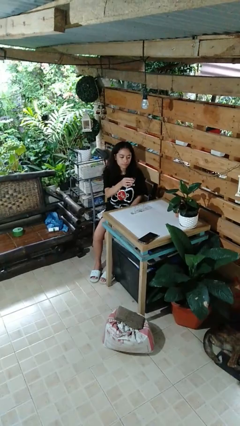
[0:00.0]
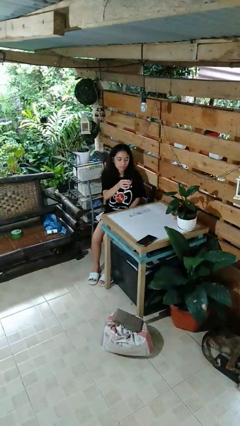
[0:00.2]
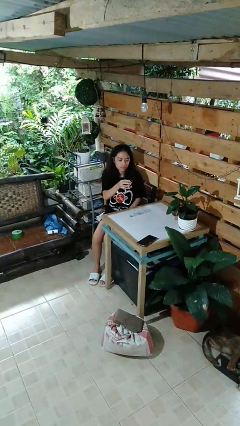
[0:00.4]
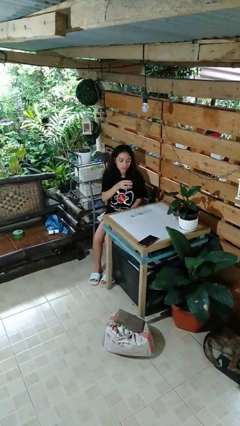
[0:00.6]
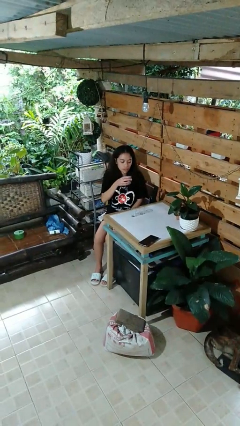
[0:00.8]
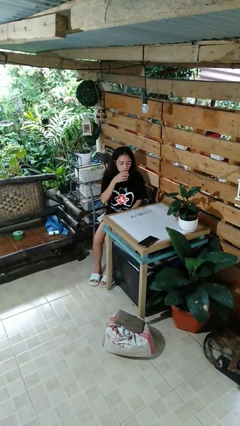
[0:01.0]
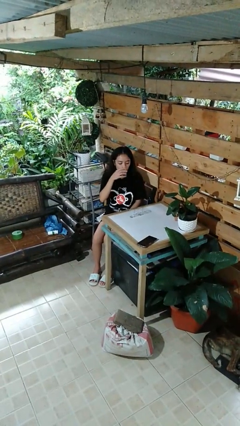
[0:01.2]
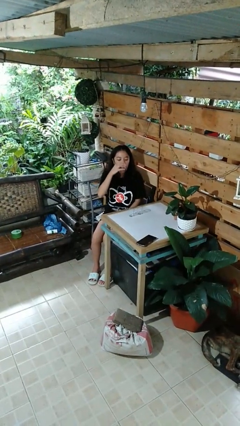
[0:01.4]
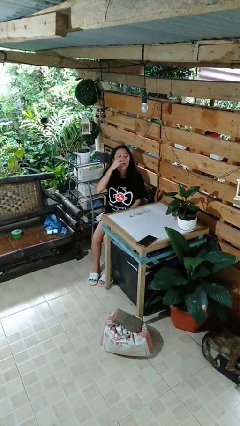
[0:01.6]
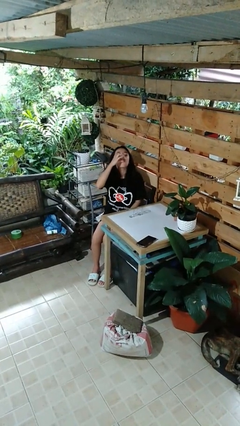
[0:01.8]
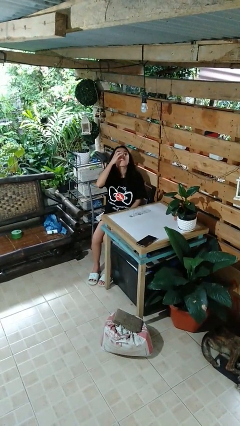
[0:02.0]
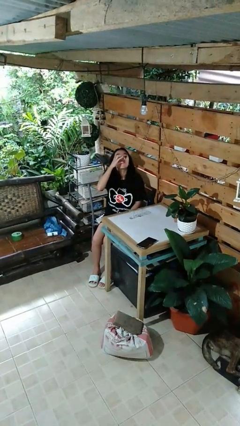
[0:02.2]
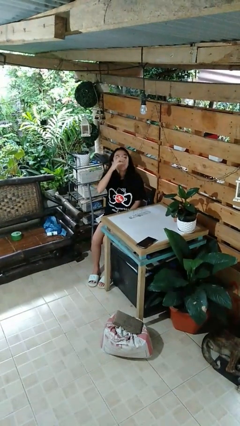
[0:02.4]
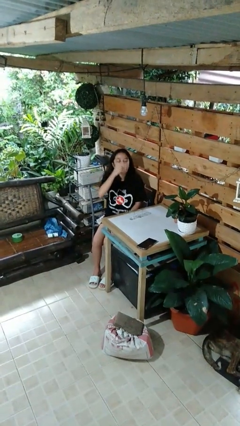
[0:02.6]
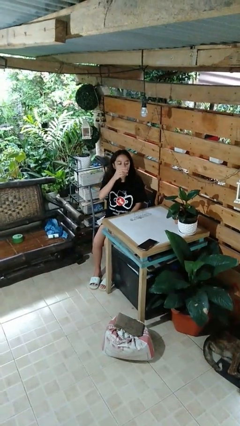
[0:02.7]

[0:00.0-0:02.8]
person drinks from shotglass

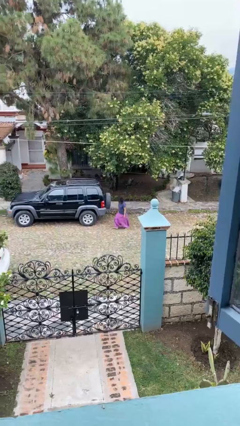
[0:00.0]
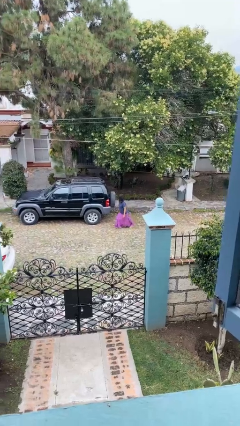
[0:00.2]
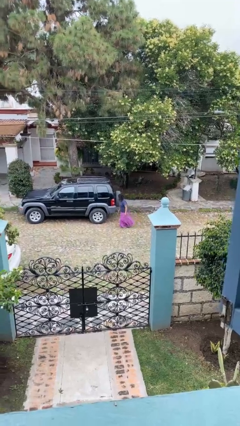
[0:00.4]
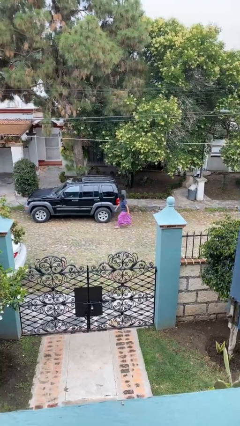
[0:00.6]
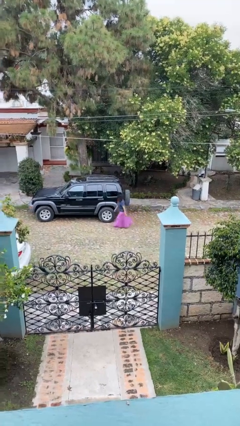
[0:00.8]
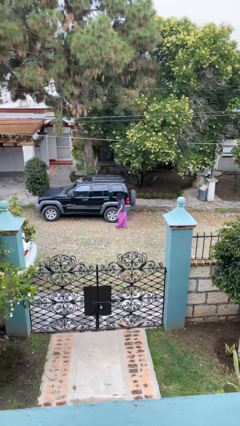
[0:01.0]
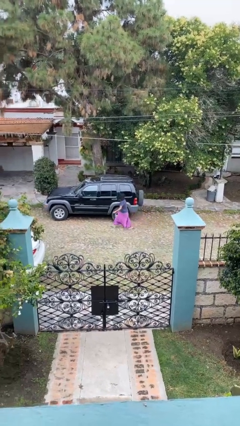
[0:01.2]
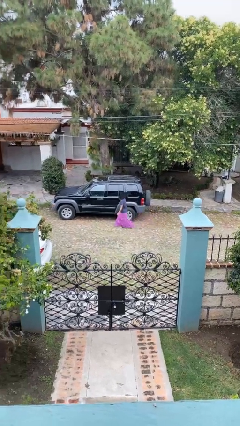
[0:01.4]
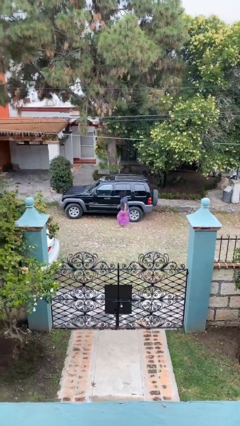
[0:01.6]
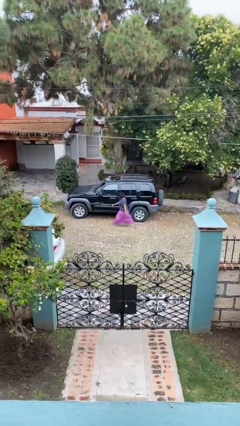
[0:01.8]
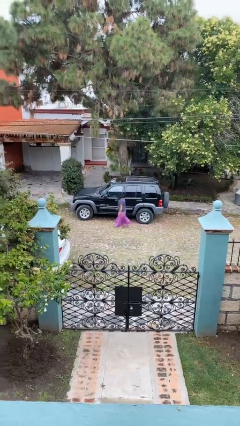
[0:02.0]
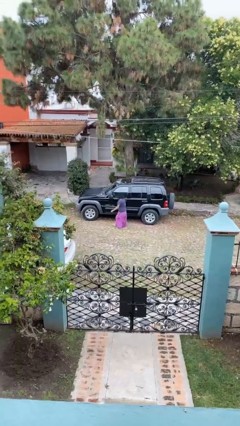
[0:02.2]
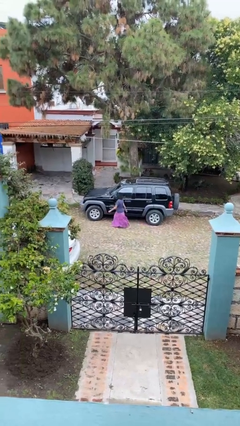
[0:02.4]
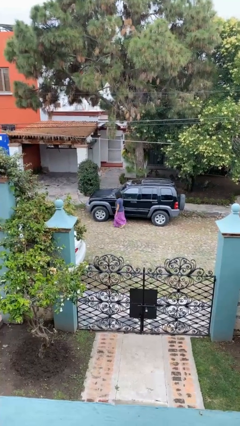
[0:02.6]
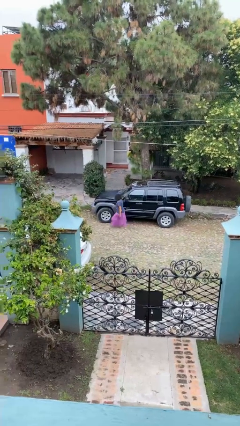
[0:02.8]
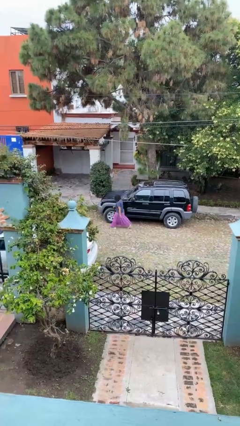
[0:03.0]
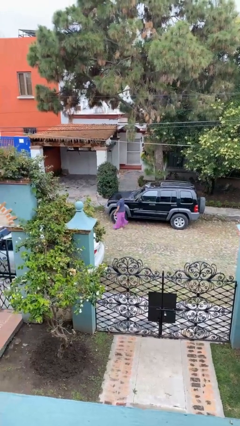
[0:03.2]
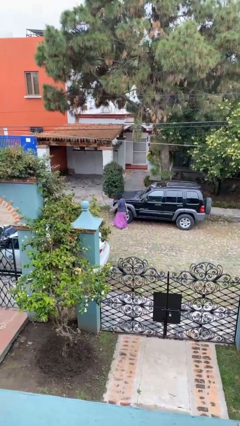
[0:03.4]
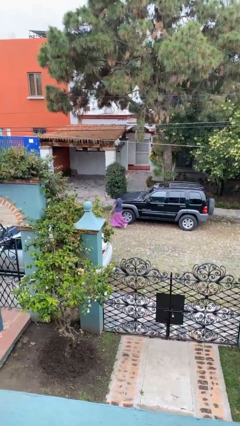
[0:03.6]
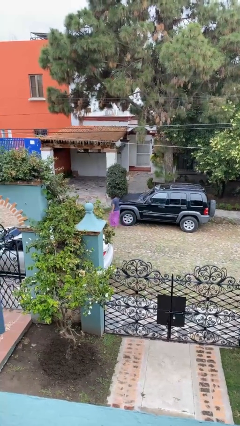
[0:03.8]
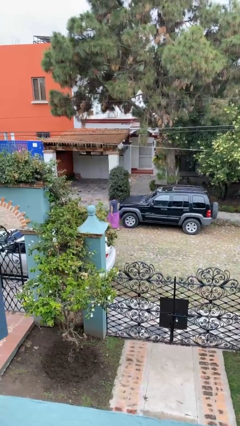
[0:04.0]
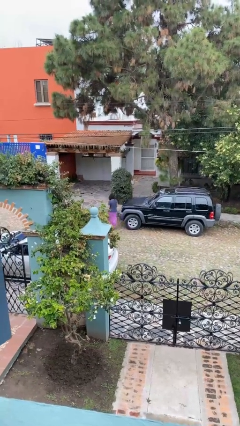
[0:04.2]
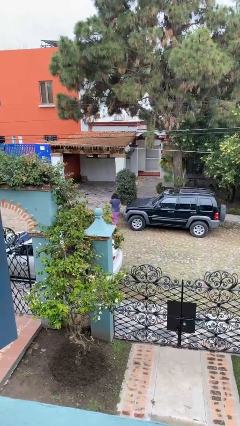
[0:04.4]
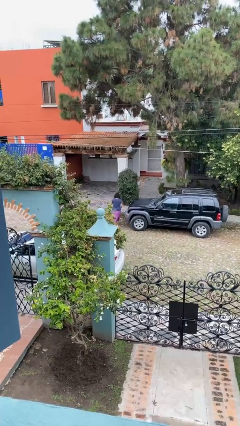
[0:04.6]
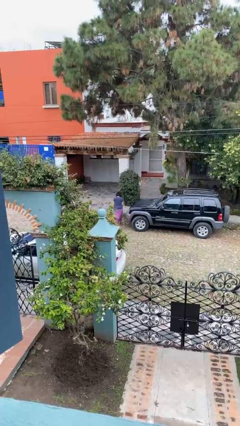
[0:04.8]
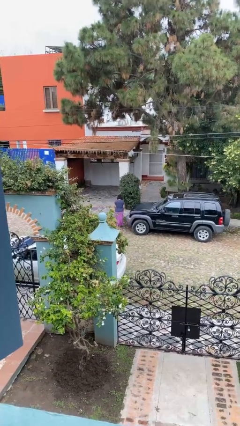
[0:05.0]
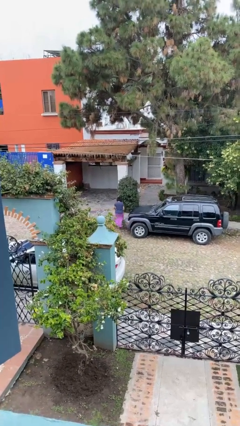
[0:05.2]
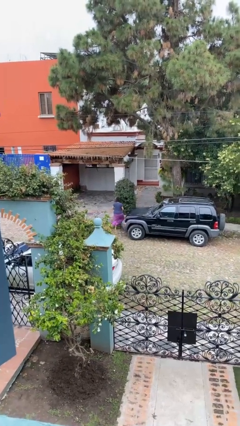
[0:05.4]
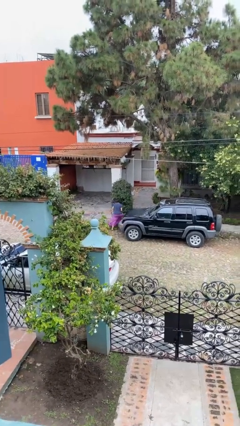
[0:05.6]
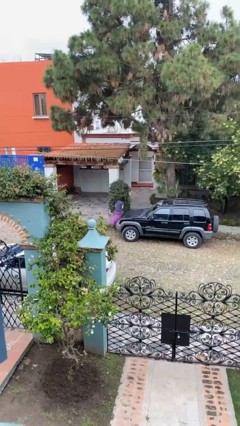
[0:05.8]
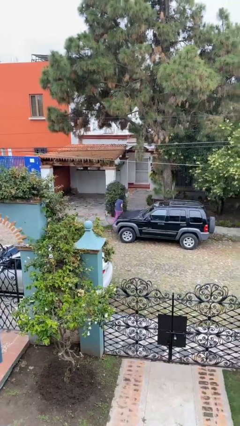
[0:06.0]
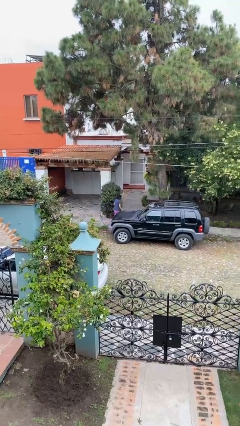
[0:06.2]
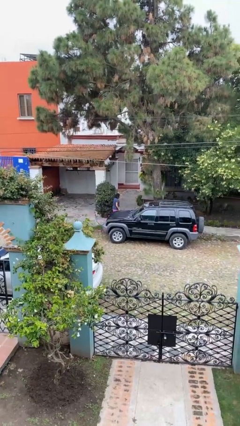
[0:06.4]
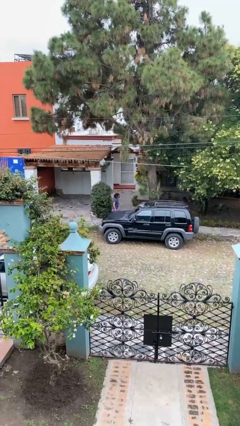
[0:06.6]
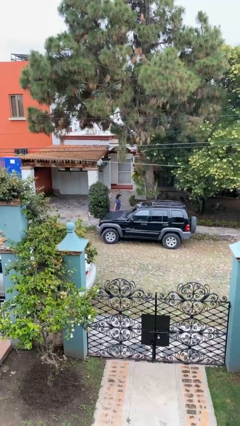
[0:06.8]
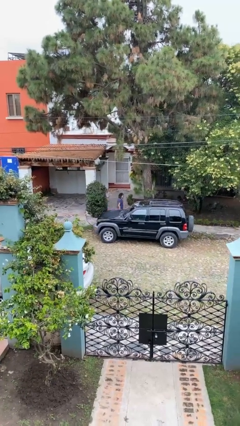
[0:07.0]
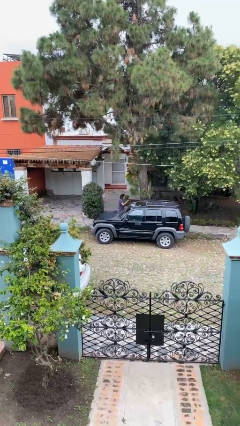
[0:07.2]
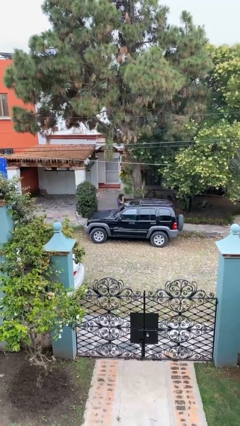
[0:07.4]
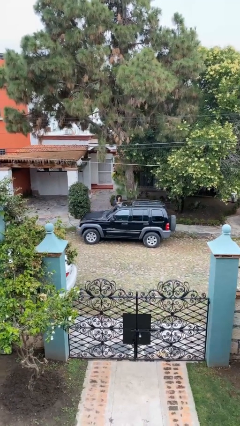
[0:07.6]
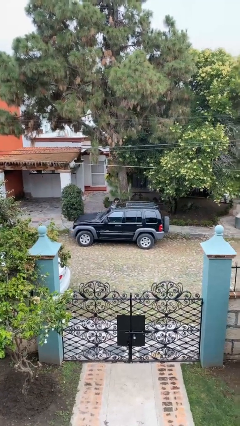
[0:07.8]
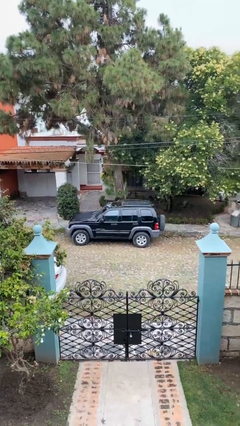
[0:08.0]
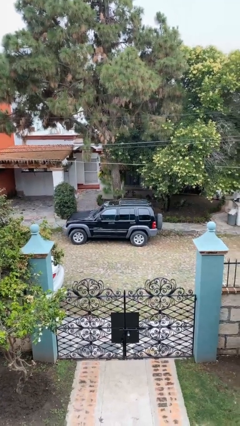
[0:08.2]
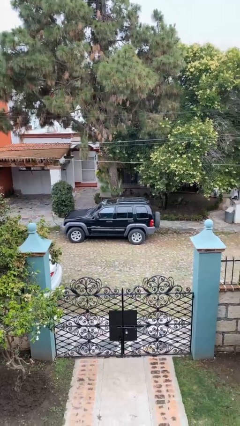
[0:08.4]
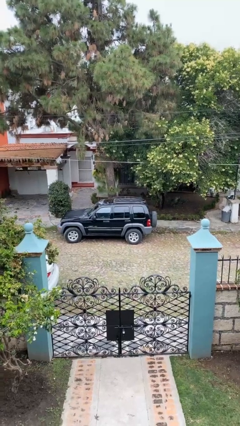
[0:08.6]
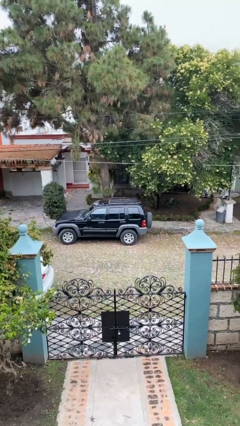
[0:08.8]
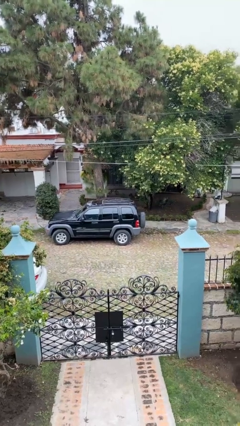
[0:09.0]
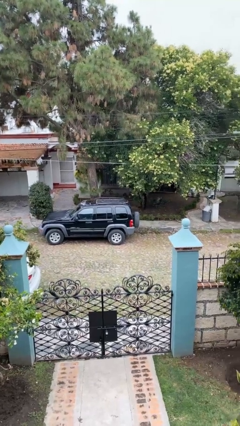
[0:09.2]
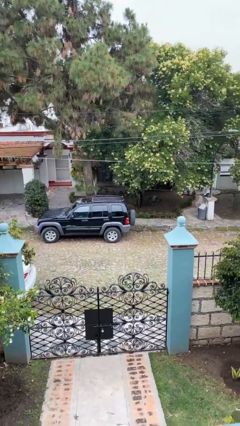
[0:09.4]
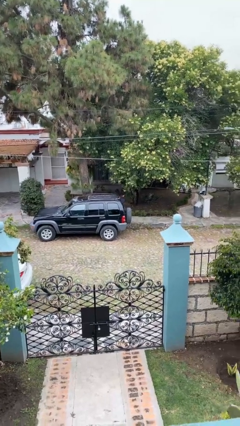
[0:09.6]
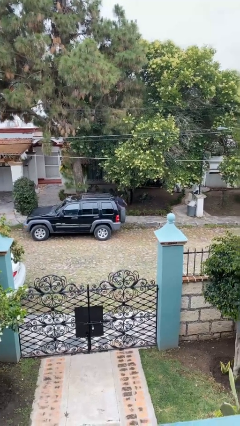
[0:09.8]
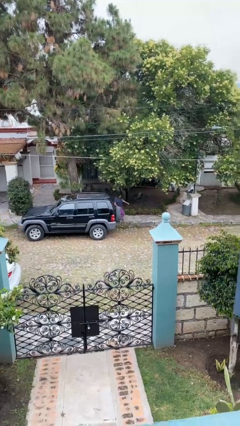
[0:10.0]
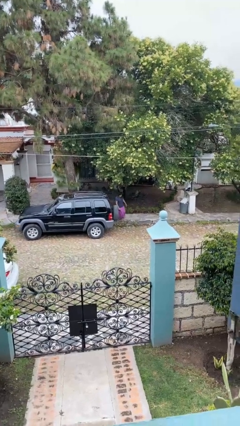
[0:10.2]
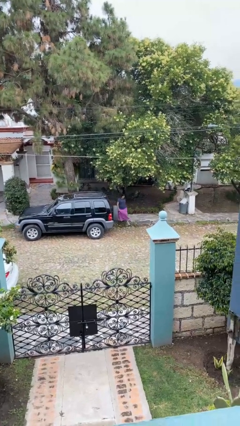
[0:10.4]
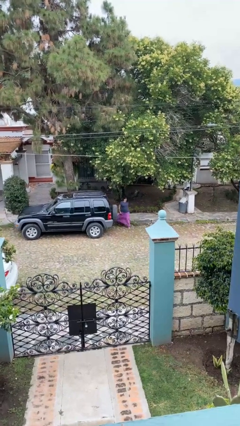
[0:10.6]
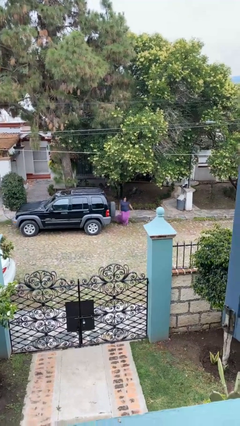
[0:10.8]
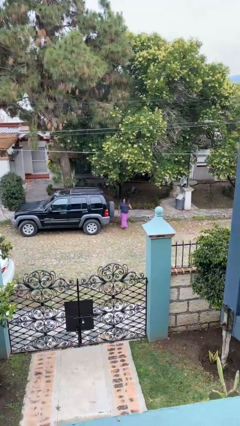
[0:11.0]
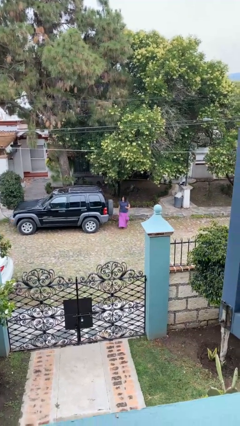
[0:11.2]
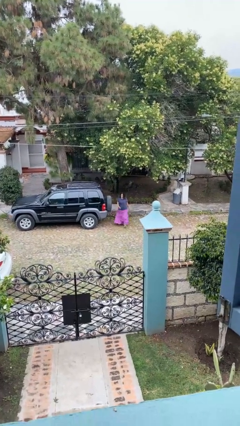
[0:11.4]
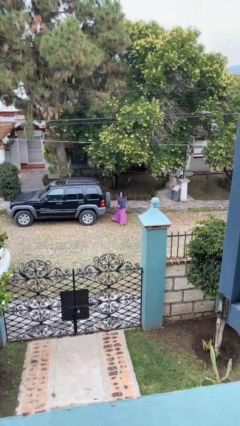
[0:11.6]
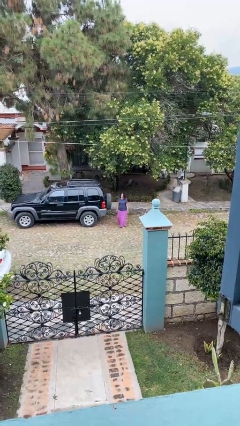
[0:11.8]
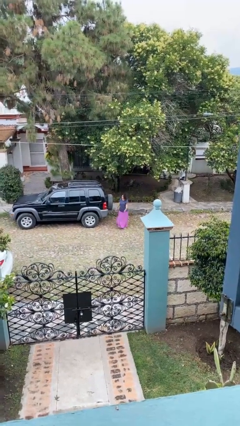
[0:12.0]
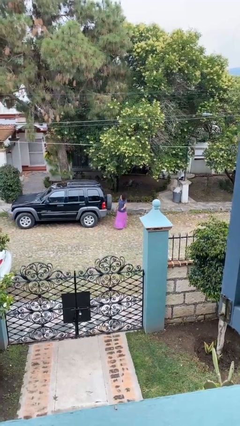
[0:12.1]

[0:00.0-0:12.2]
person walks around car

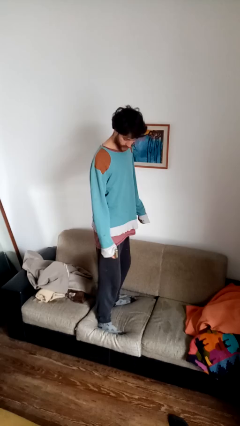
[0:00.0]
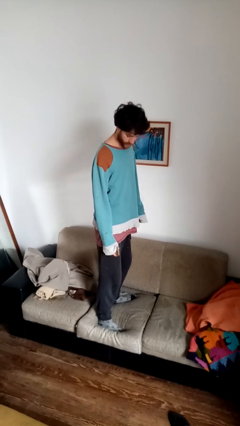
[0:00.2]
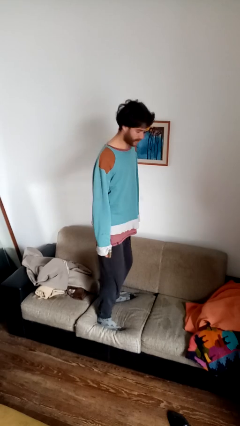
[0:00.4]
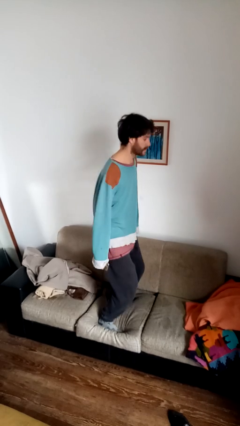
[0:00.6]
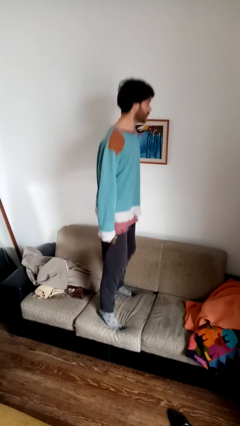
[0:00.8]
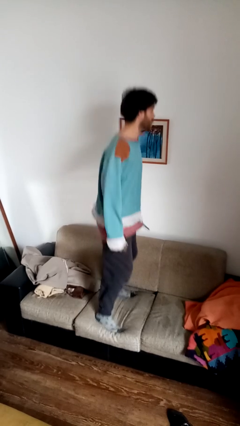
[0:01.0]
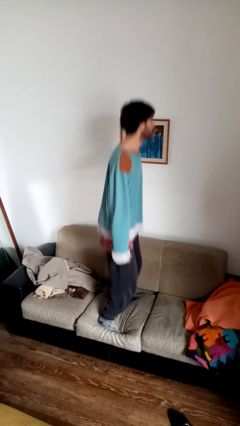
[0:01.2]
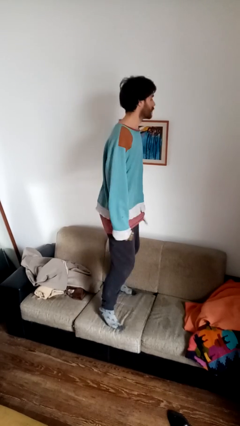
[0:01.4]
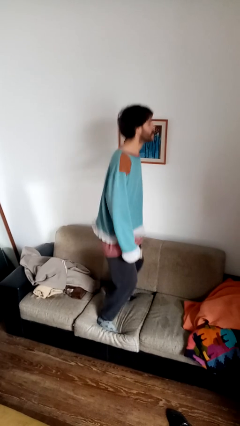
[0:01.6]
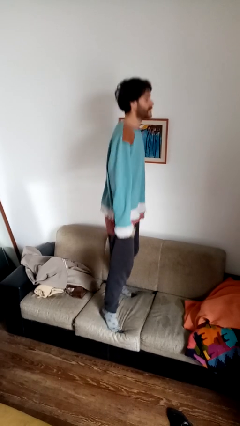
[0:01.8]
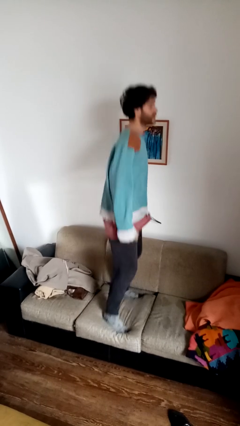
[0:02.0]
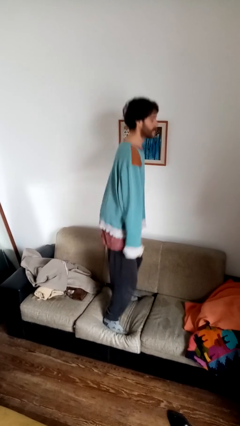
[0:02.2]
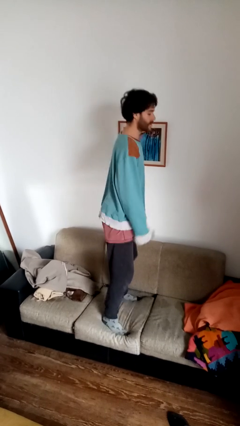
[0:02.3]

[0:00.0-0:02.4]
person jumps on couch
